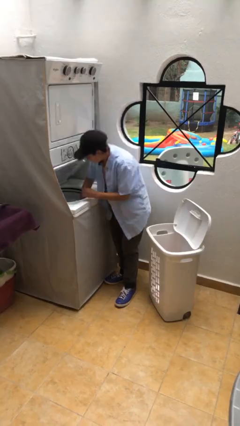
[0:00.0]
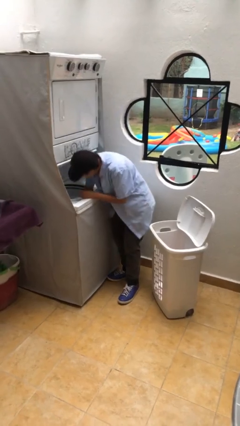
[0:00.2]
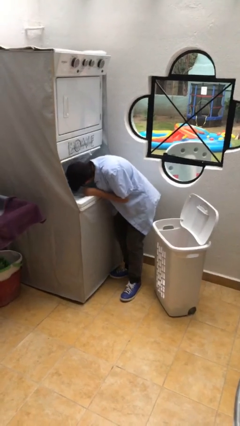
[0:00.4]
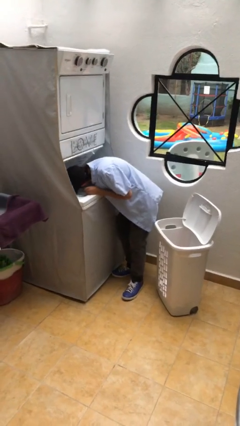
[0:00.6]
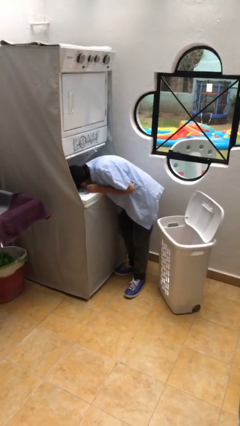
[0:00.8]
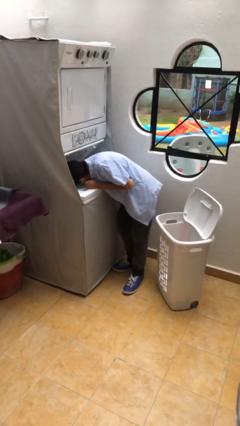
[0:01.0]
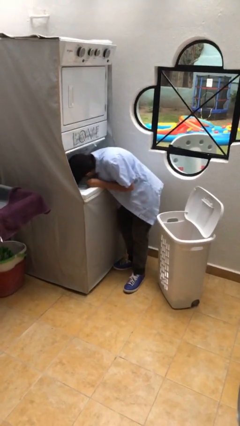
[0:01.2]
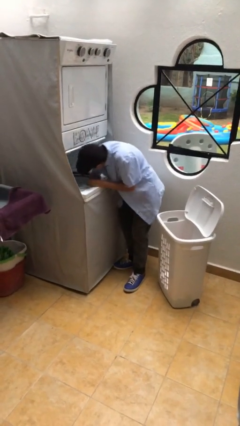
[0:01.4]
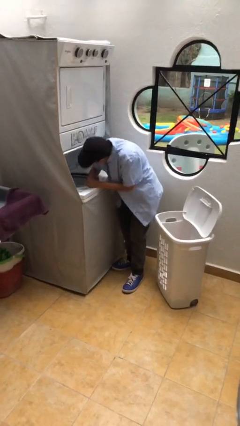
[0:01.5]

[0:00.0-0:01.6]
person unloads clotheswasher

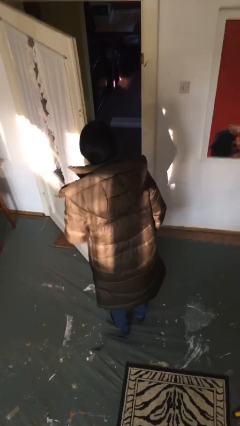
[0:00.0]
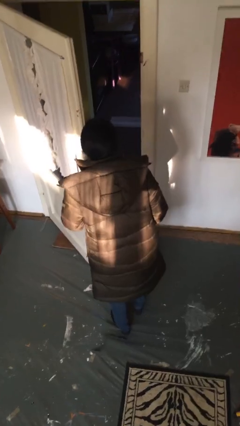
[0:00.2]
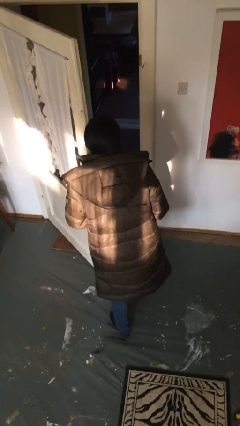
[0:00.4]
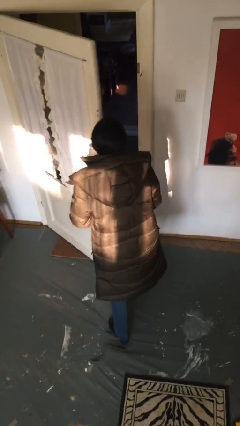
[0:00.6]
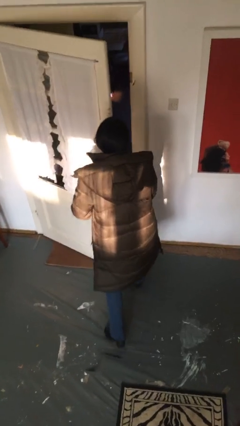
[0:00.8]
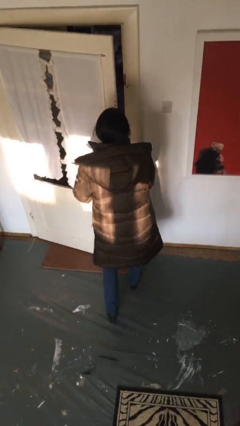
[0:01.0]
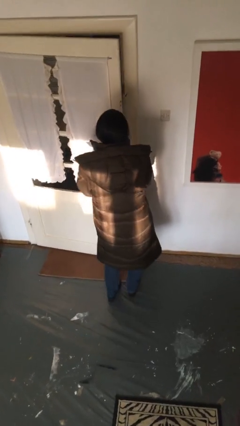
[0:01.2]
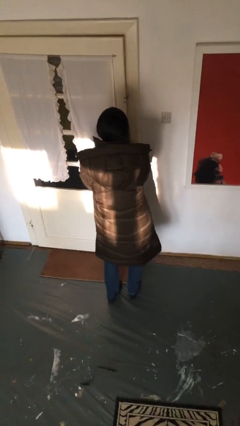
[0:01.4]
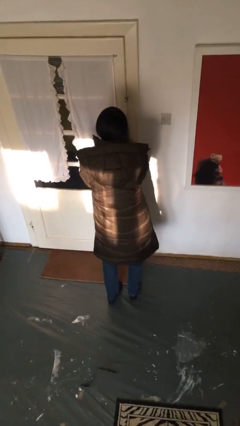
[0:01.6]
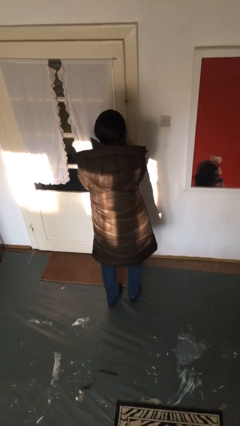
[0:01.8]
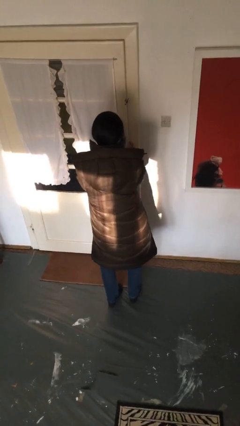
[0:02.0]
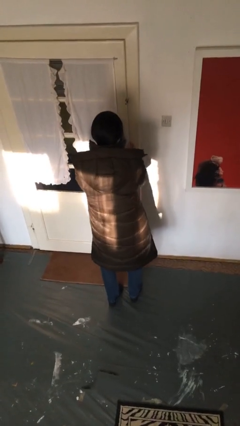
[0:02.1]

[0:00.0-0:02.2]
person closes facility door

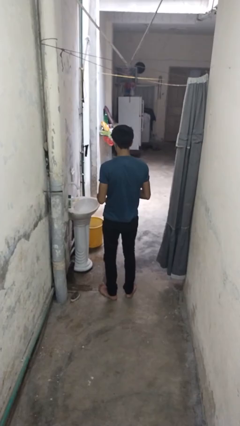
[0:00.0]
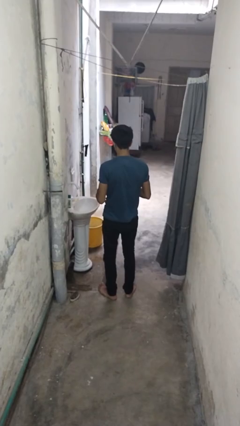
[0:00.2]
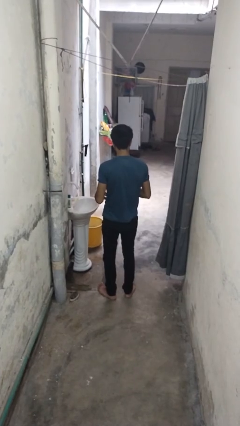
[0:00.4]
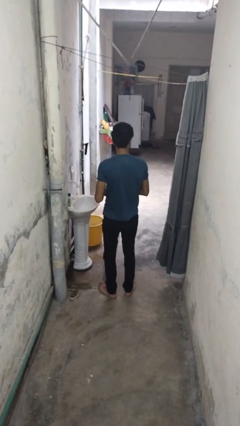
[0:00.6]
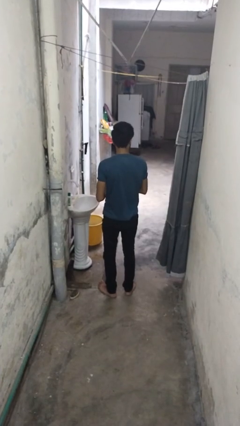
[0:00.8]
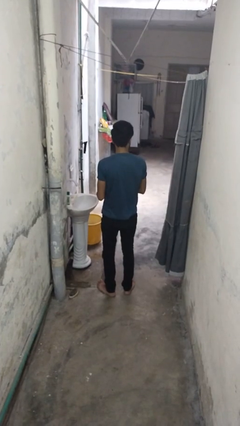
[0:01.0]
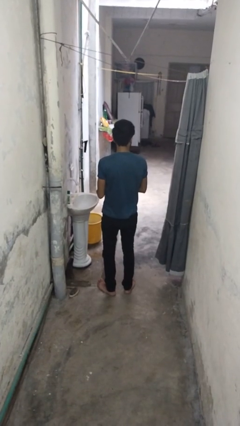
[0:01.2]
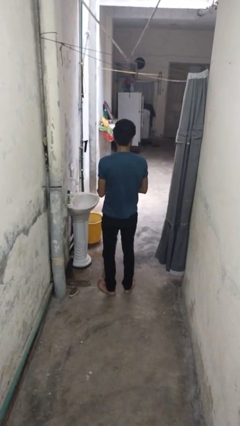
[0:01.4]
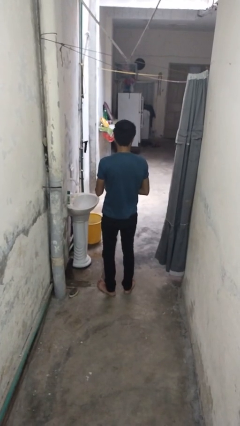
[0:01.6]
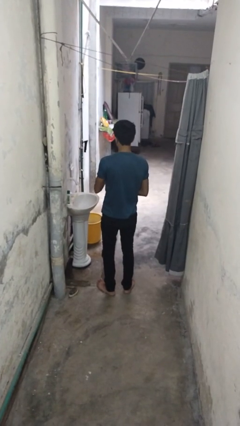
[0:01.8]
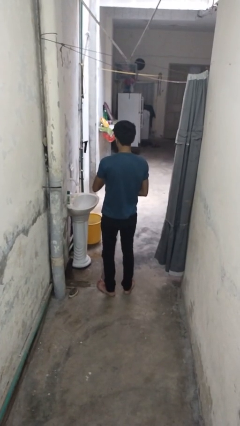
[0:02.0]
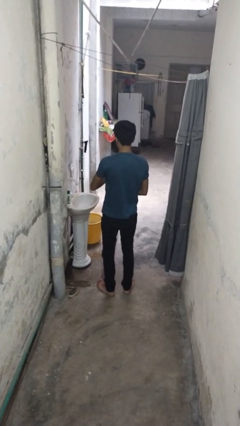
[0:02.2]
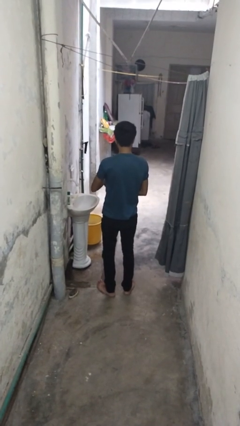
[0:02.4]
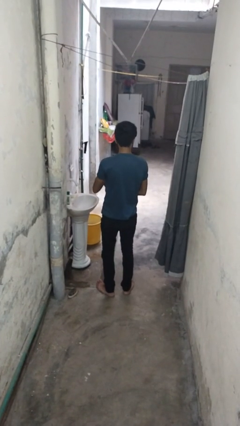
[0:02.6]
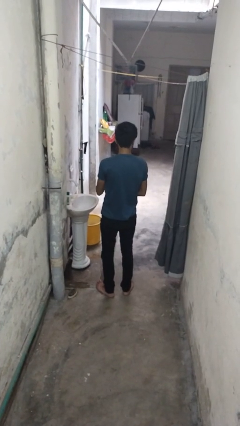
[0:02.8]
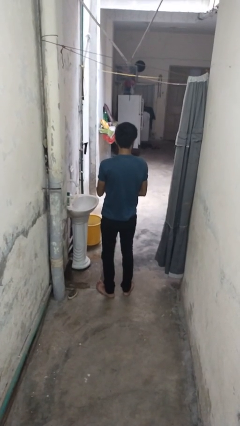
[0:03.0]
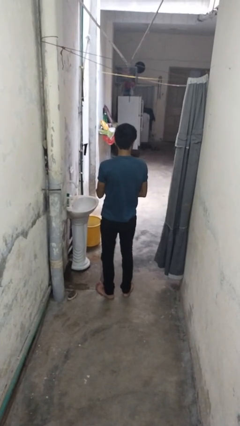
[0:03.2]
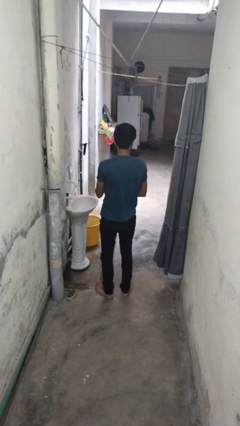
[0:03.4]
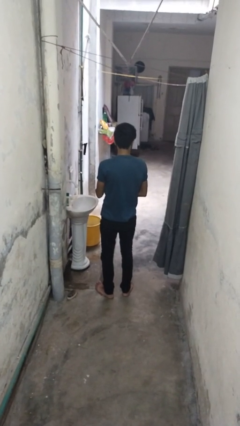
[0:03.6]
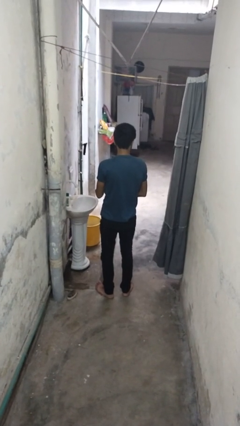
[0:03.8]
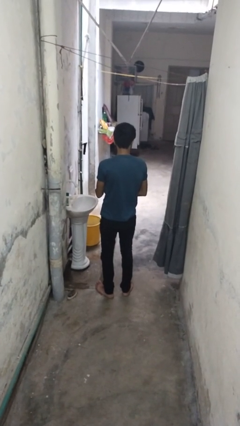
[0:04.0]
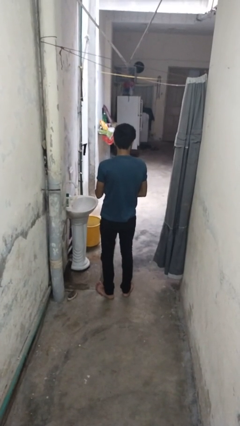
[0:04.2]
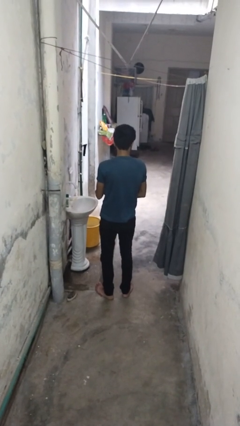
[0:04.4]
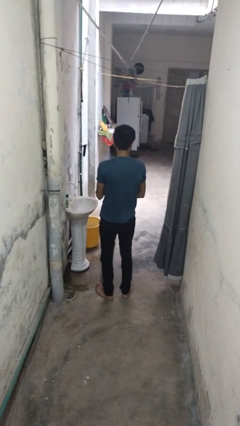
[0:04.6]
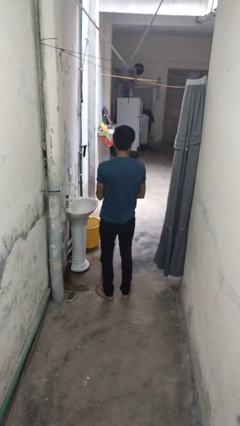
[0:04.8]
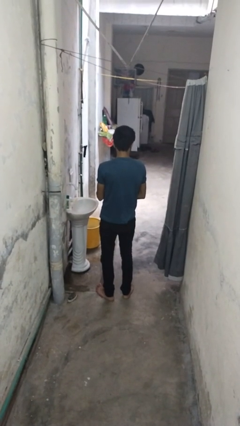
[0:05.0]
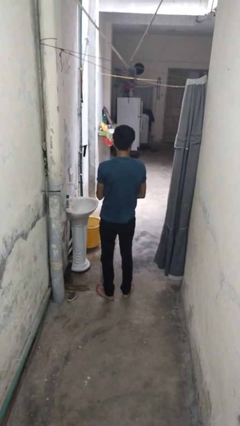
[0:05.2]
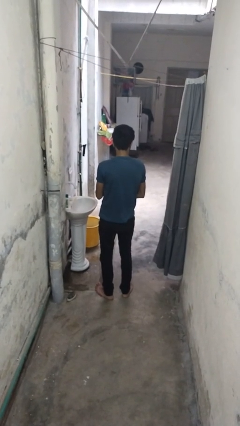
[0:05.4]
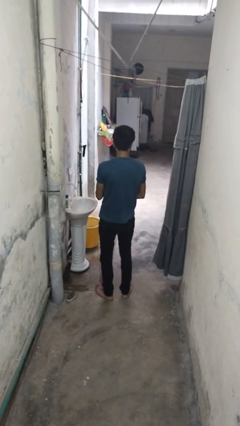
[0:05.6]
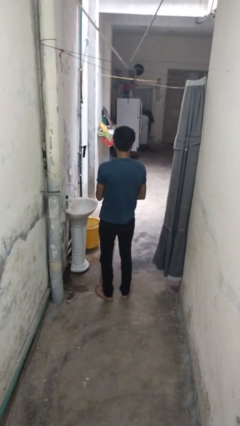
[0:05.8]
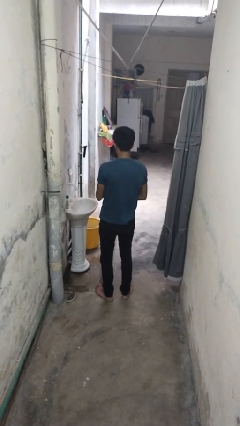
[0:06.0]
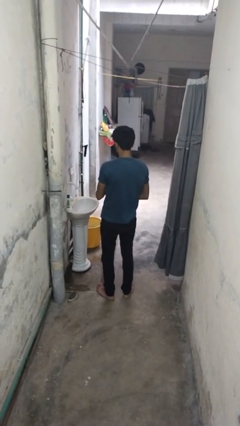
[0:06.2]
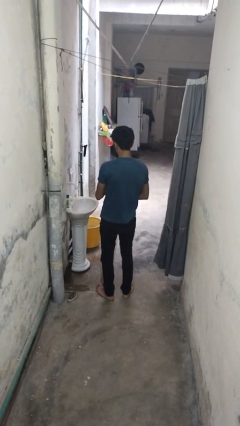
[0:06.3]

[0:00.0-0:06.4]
person puts on wristwatch

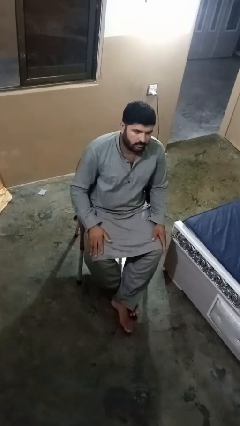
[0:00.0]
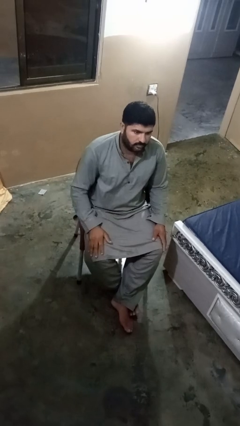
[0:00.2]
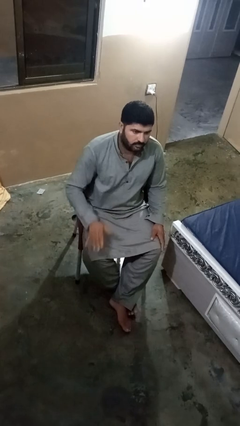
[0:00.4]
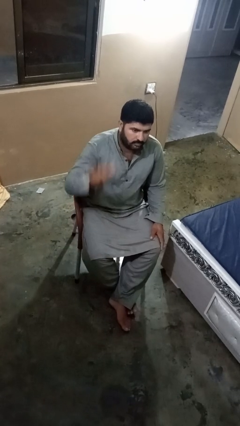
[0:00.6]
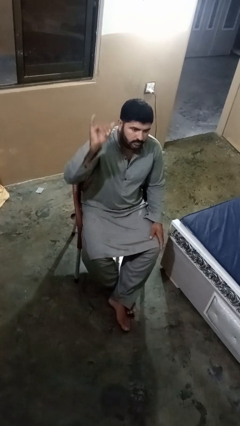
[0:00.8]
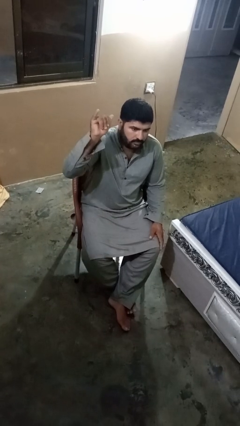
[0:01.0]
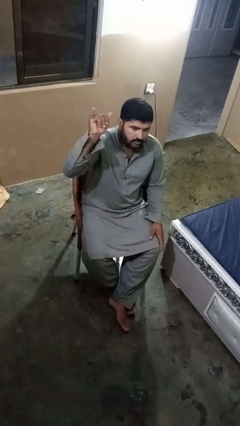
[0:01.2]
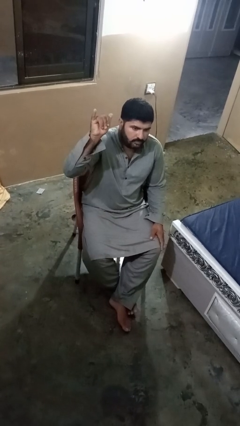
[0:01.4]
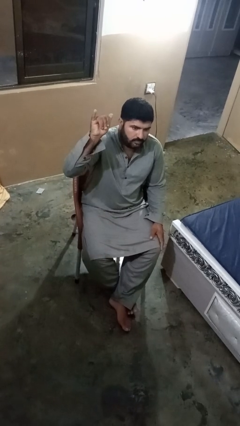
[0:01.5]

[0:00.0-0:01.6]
person gestures hang loose

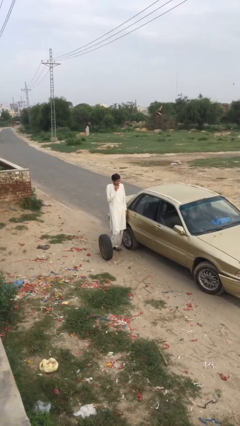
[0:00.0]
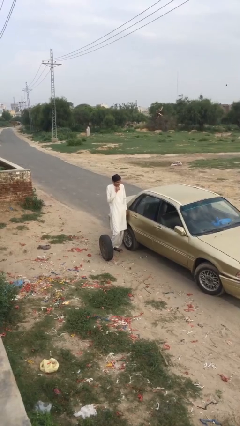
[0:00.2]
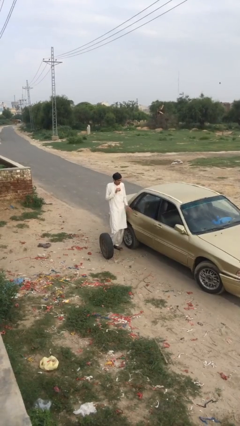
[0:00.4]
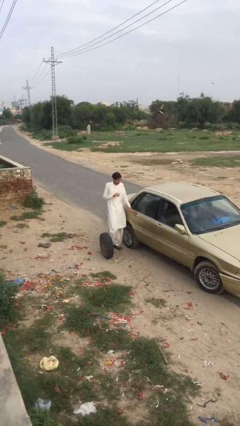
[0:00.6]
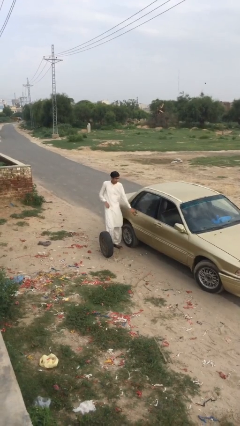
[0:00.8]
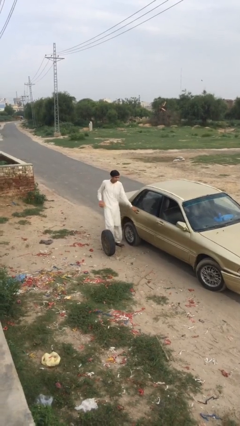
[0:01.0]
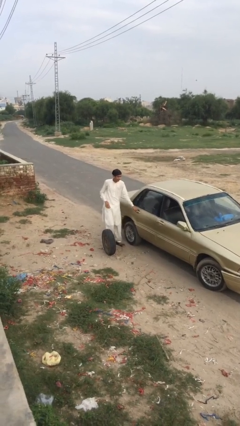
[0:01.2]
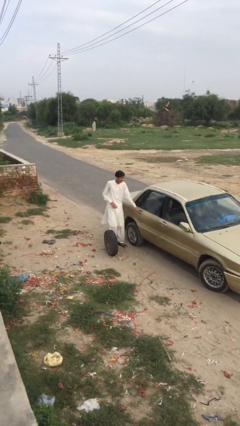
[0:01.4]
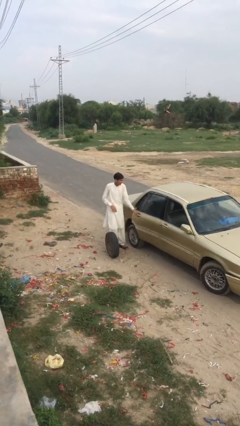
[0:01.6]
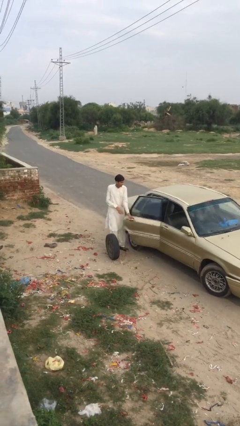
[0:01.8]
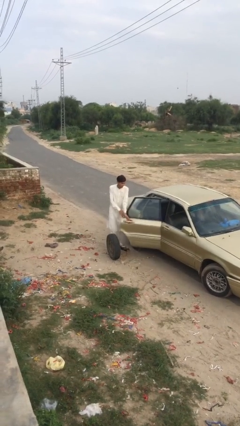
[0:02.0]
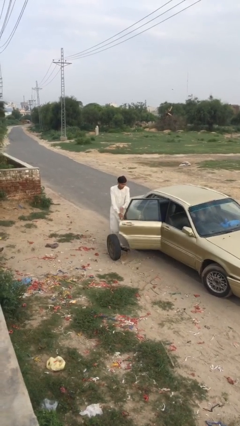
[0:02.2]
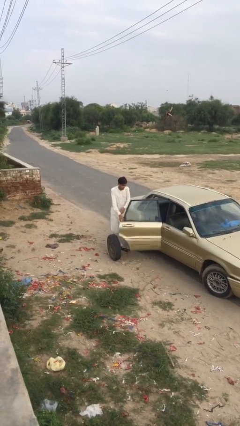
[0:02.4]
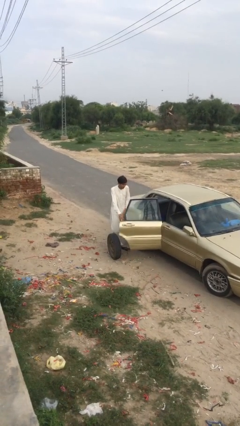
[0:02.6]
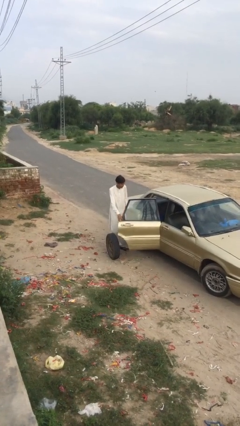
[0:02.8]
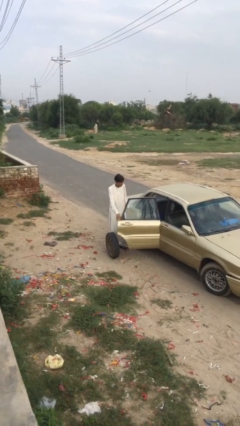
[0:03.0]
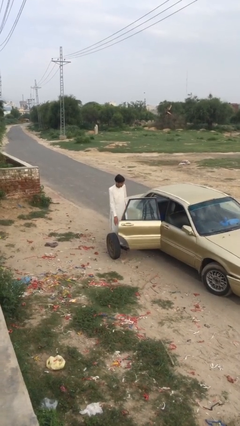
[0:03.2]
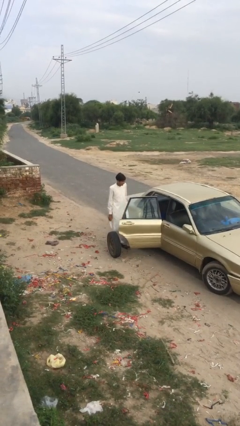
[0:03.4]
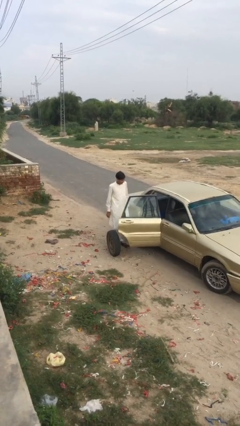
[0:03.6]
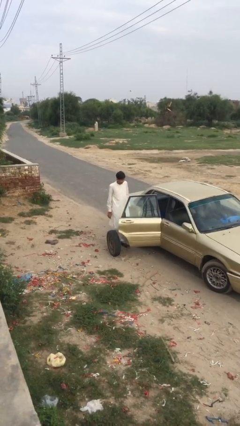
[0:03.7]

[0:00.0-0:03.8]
person opens car door

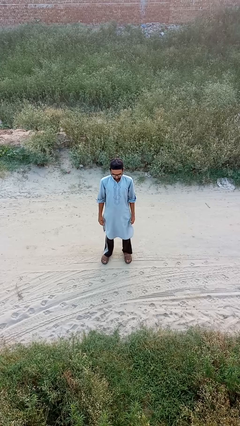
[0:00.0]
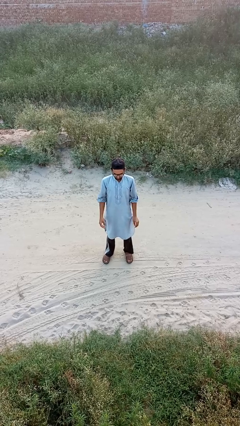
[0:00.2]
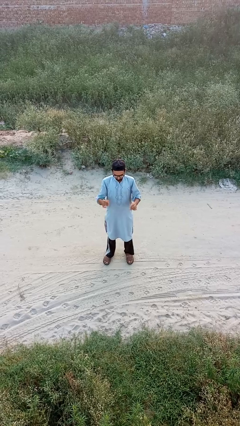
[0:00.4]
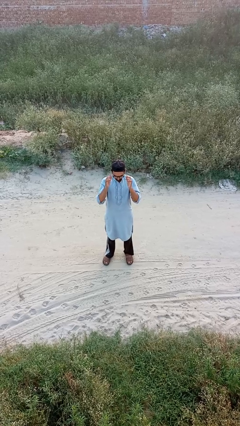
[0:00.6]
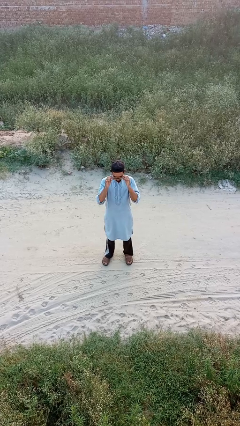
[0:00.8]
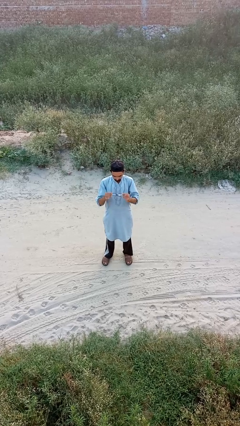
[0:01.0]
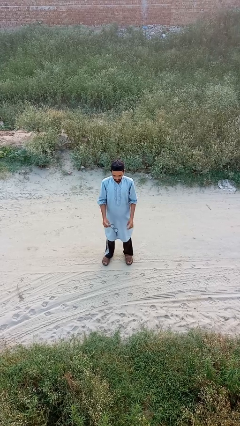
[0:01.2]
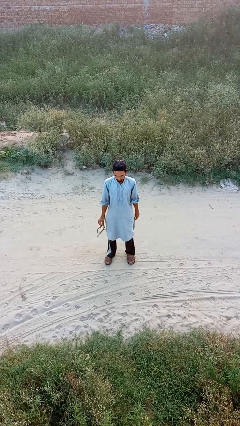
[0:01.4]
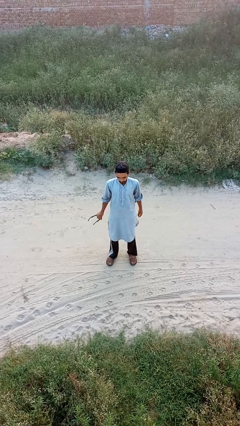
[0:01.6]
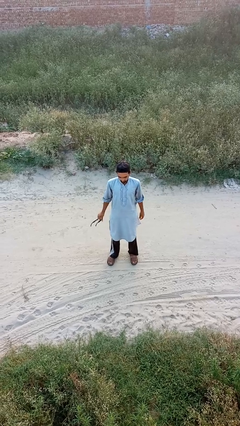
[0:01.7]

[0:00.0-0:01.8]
person takes off glasses
